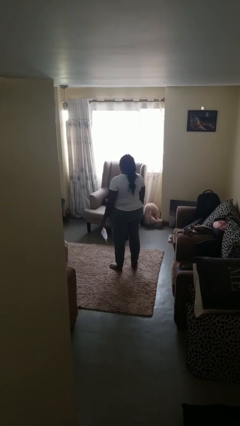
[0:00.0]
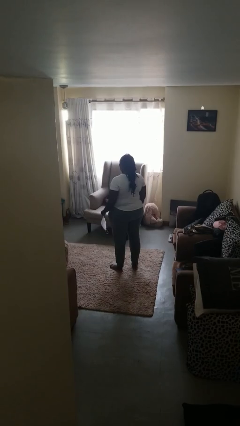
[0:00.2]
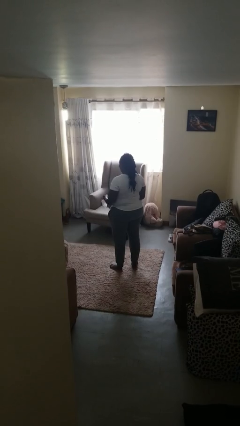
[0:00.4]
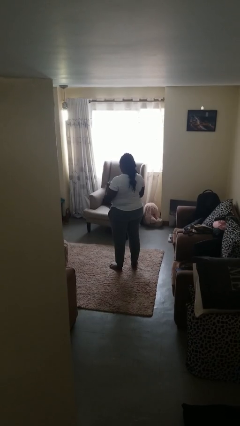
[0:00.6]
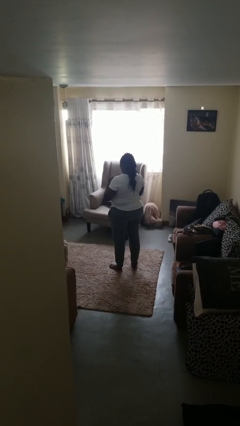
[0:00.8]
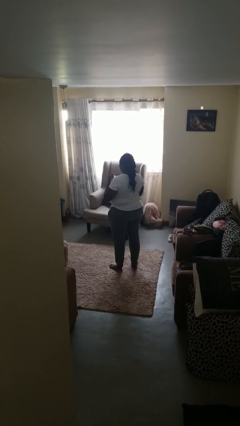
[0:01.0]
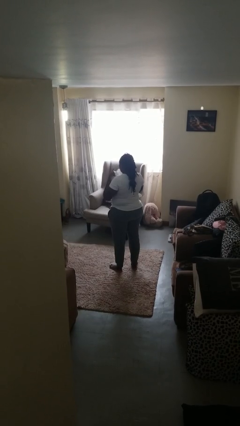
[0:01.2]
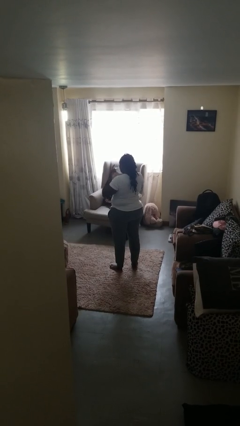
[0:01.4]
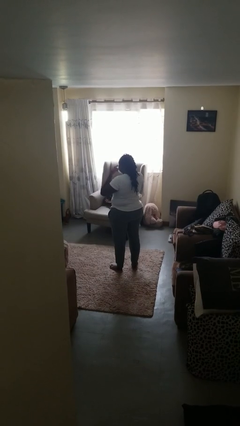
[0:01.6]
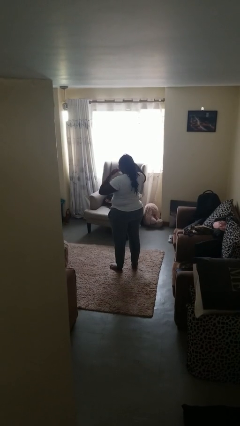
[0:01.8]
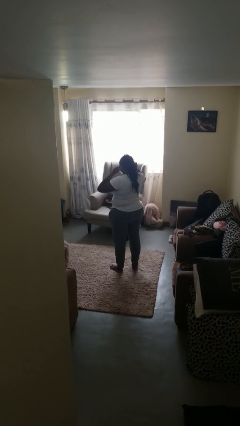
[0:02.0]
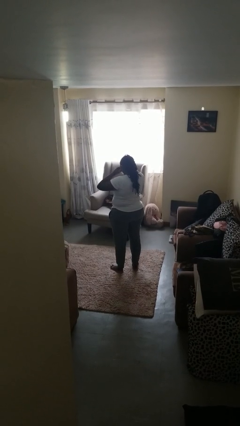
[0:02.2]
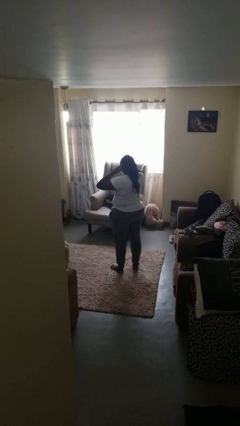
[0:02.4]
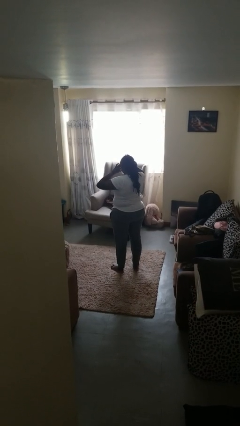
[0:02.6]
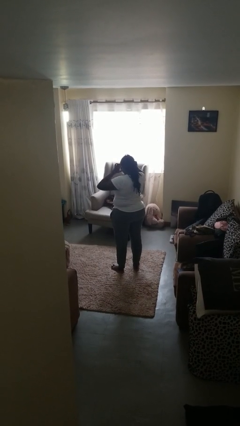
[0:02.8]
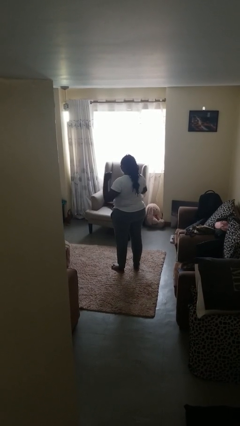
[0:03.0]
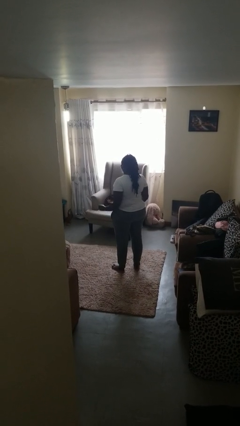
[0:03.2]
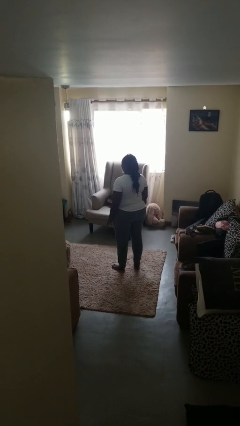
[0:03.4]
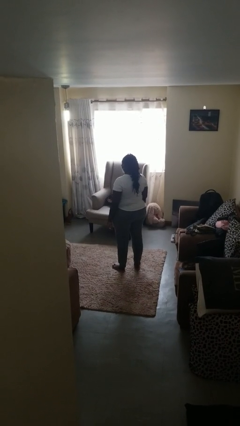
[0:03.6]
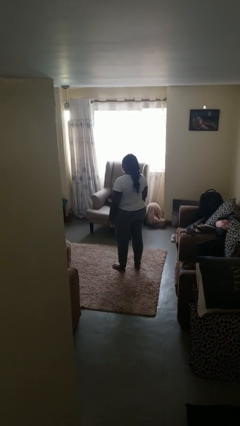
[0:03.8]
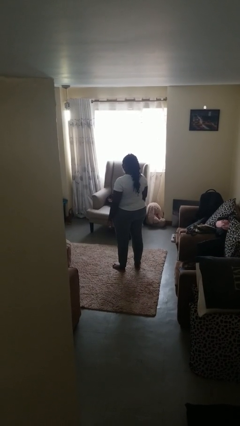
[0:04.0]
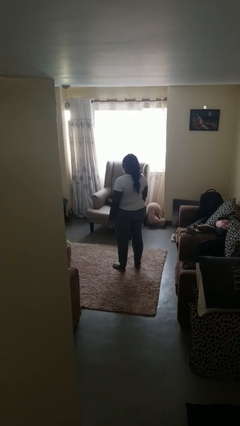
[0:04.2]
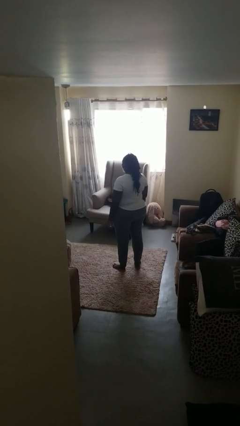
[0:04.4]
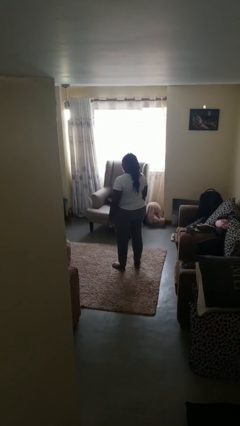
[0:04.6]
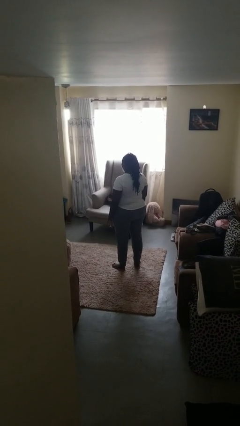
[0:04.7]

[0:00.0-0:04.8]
person puts on facemask

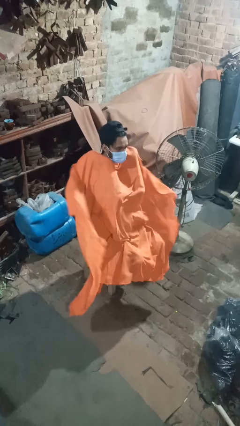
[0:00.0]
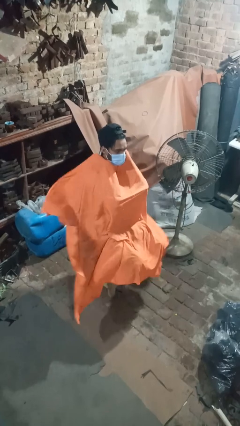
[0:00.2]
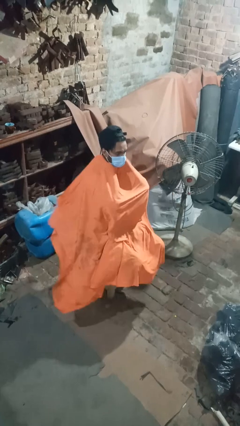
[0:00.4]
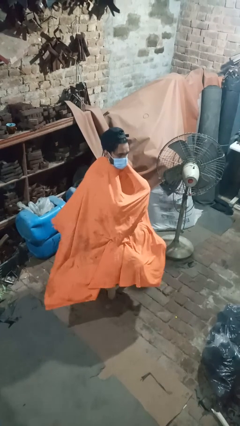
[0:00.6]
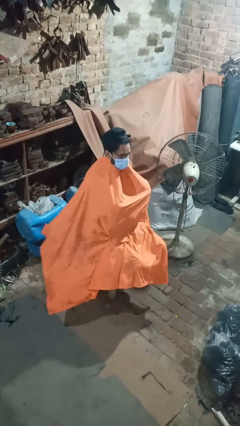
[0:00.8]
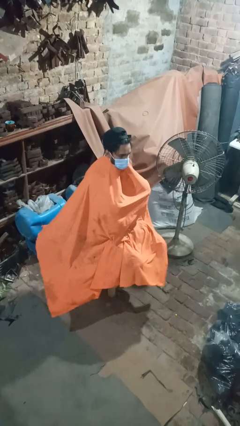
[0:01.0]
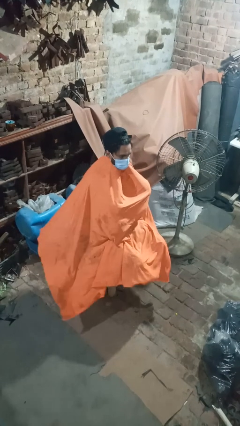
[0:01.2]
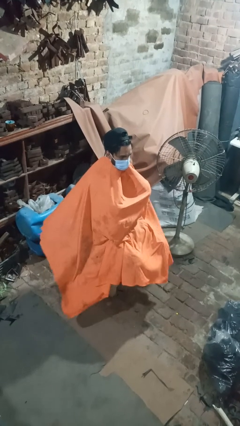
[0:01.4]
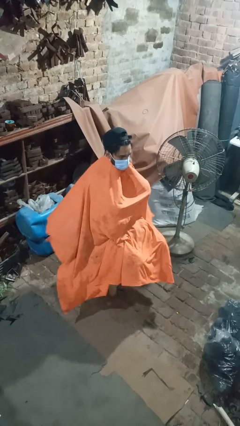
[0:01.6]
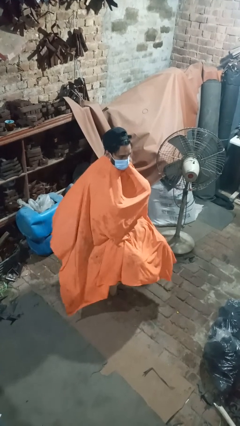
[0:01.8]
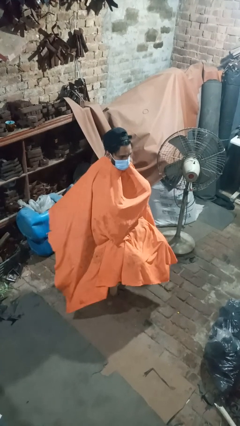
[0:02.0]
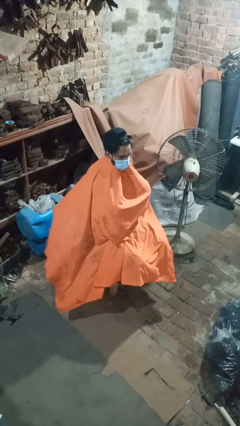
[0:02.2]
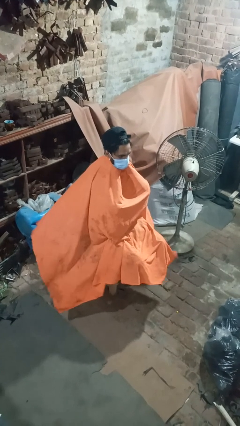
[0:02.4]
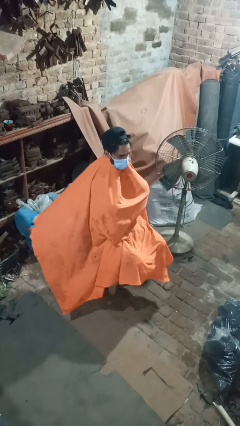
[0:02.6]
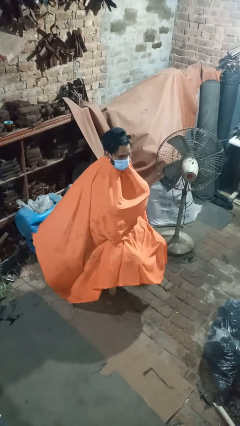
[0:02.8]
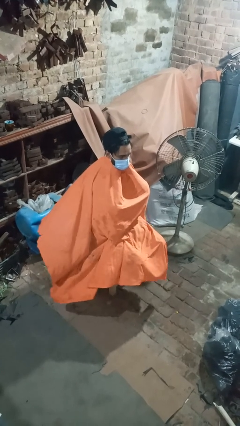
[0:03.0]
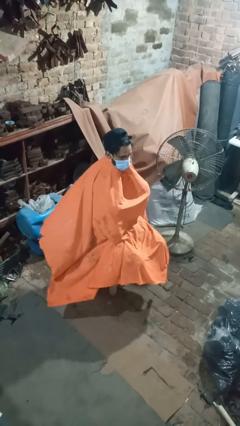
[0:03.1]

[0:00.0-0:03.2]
person covers with blanket

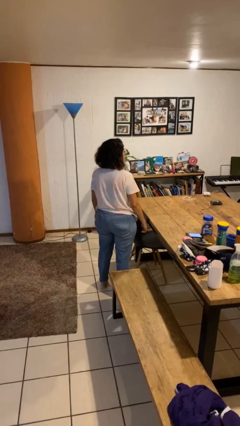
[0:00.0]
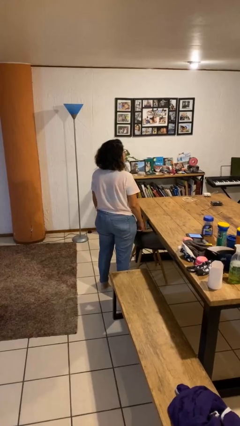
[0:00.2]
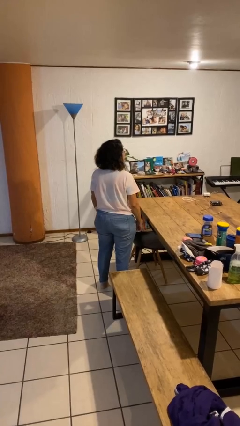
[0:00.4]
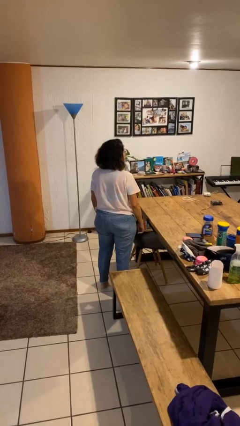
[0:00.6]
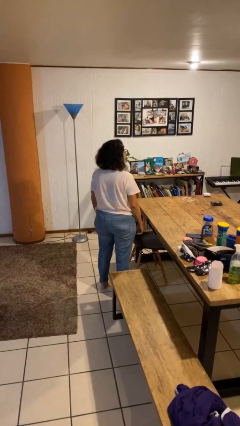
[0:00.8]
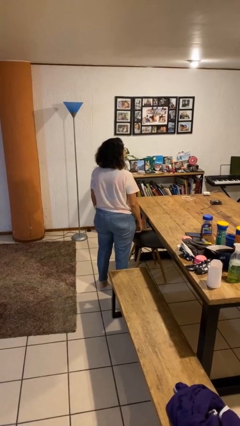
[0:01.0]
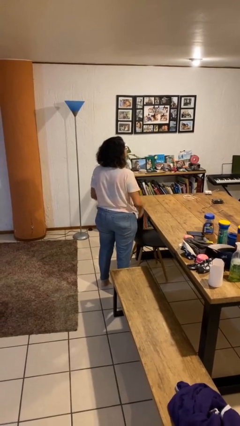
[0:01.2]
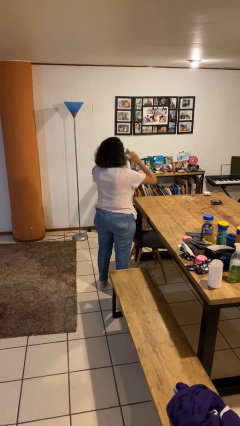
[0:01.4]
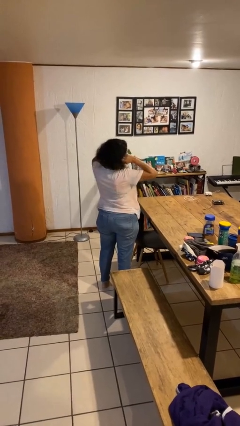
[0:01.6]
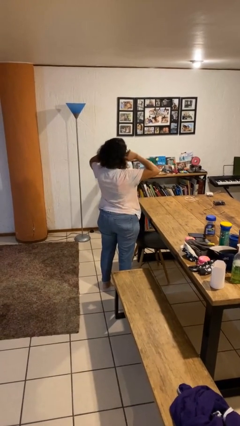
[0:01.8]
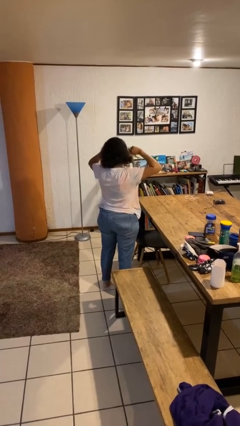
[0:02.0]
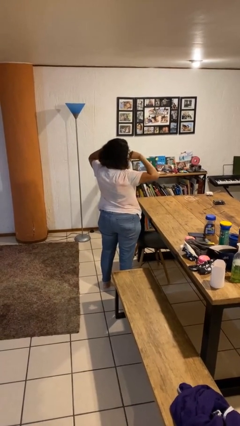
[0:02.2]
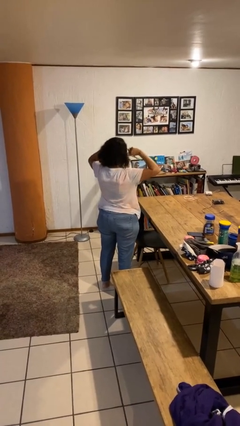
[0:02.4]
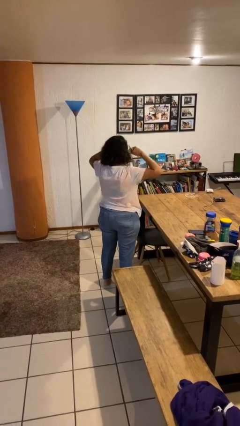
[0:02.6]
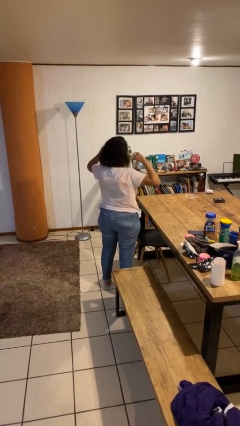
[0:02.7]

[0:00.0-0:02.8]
person puts fingers in ear

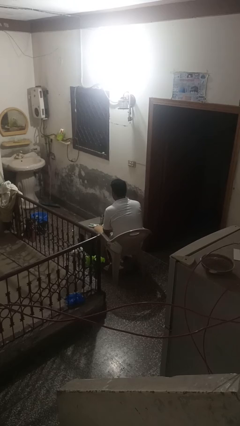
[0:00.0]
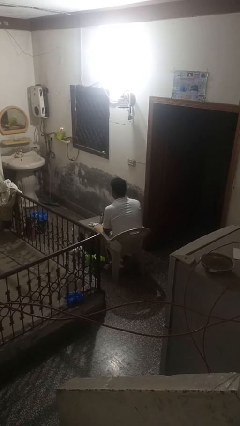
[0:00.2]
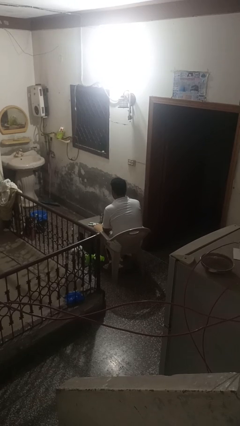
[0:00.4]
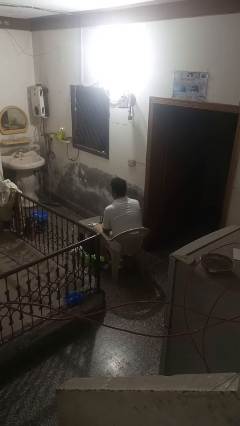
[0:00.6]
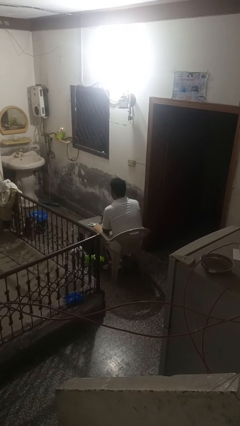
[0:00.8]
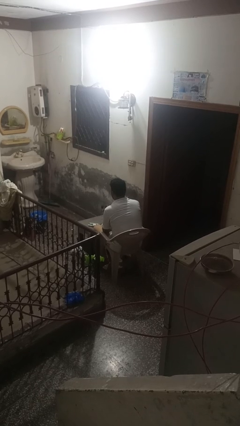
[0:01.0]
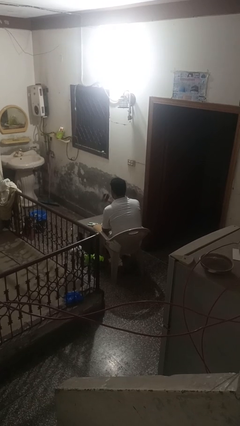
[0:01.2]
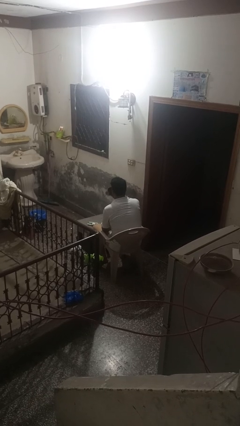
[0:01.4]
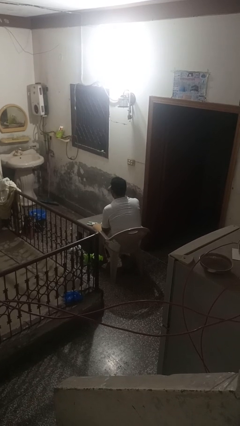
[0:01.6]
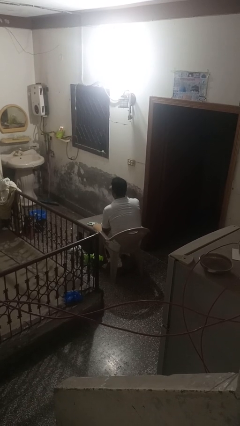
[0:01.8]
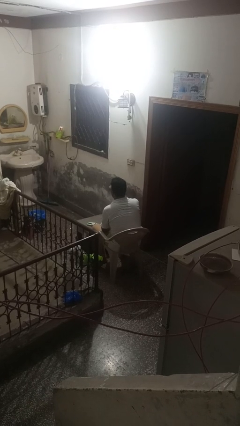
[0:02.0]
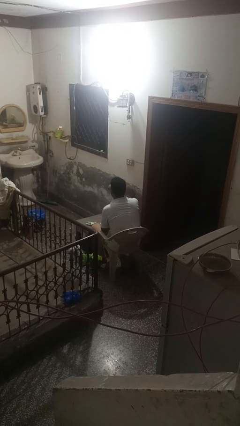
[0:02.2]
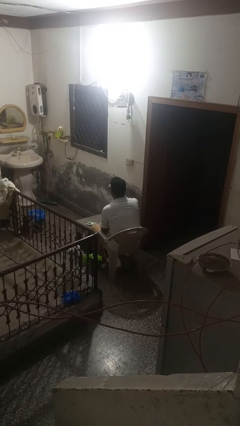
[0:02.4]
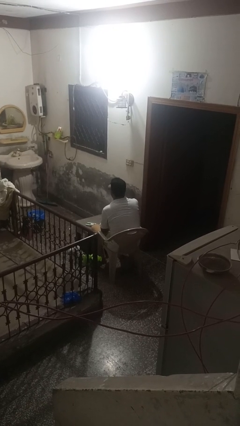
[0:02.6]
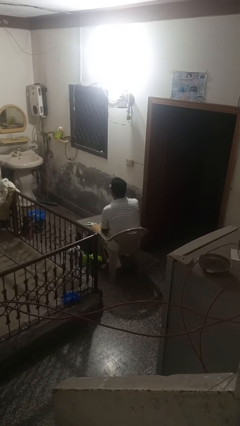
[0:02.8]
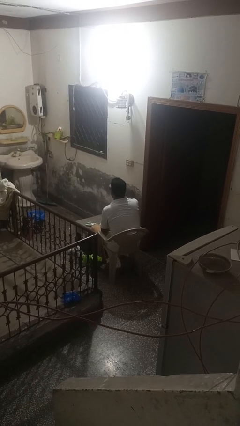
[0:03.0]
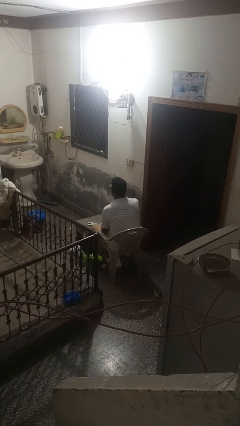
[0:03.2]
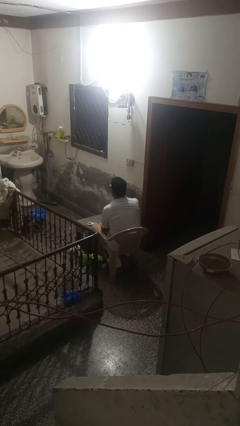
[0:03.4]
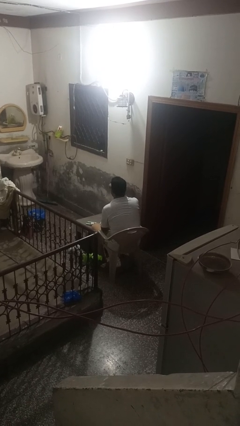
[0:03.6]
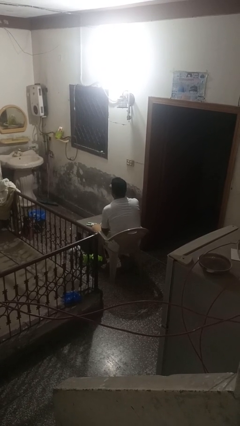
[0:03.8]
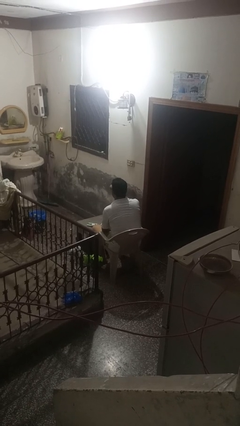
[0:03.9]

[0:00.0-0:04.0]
person drinks from cup

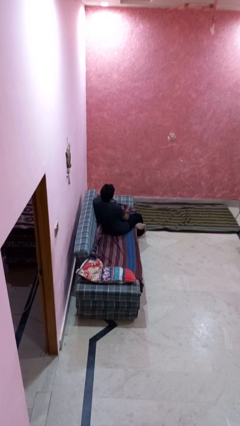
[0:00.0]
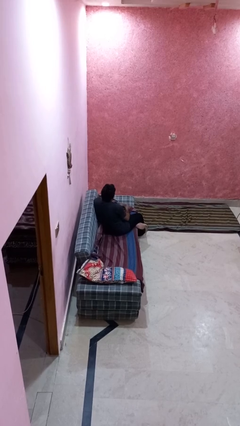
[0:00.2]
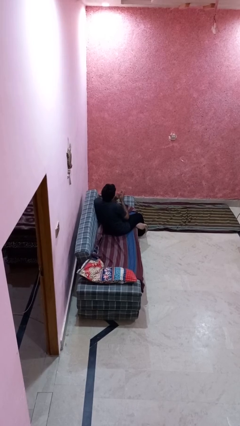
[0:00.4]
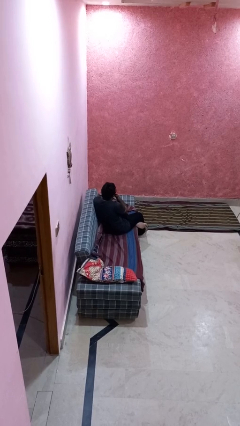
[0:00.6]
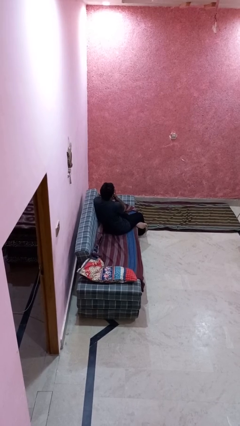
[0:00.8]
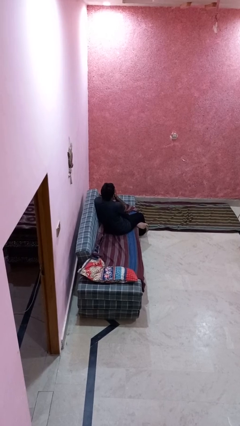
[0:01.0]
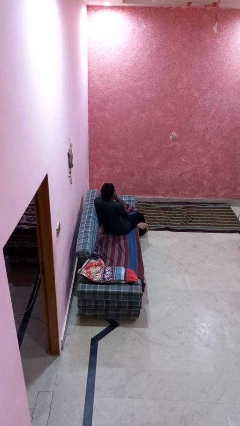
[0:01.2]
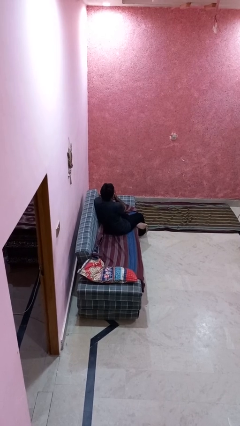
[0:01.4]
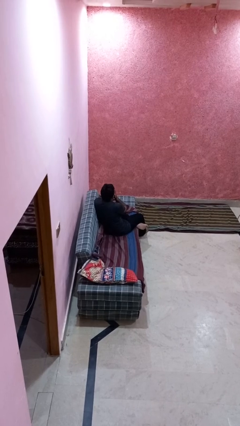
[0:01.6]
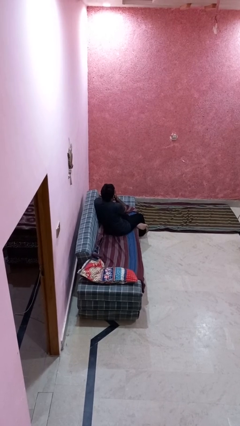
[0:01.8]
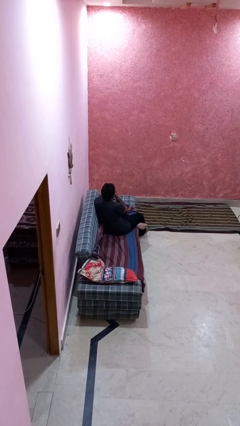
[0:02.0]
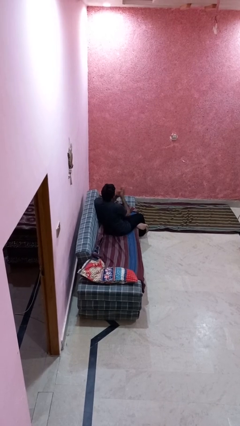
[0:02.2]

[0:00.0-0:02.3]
person covers face with hands

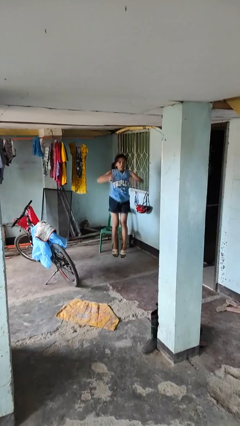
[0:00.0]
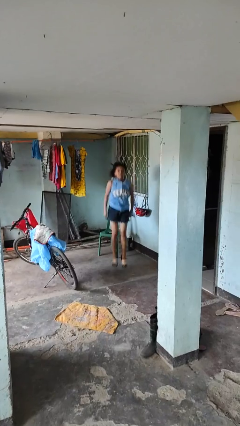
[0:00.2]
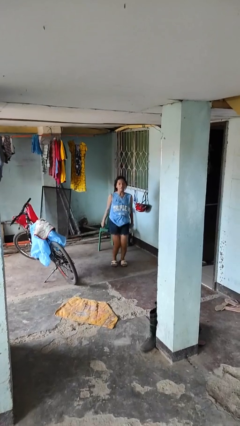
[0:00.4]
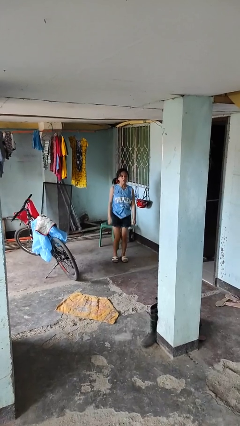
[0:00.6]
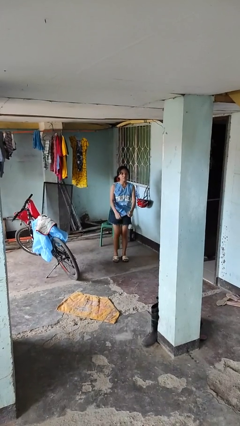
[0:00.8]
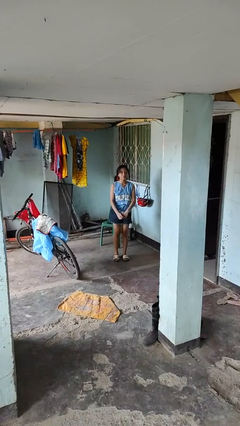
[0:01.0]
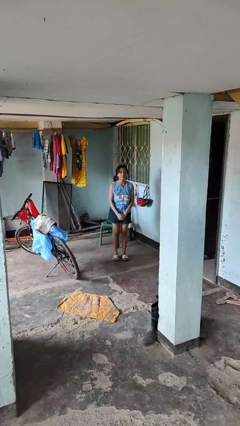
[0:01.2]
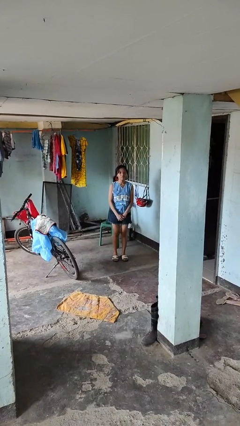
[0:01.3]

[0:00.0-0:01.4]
person jumps
